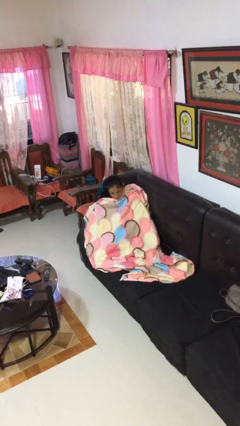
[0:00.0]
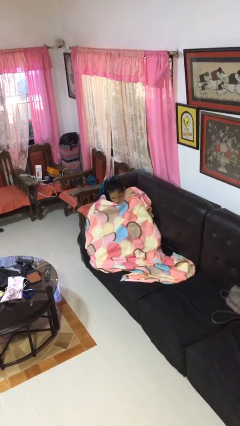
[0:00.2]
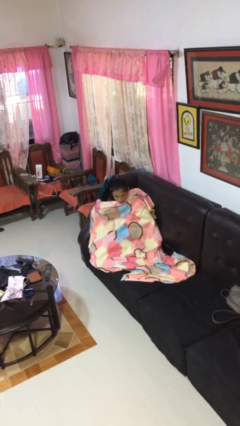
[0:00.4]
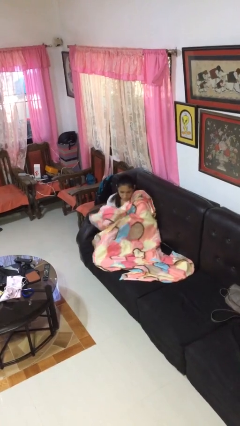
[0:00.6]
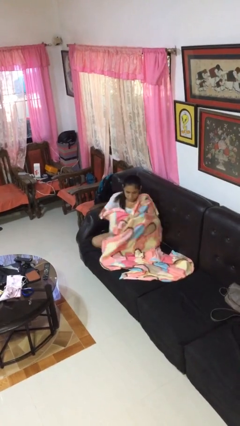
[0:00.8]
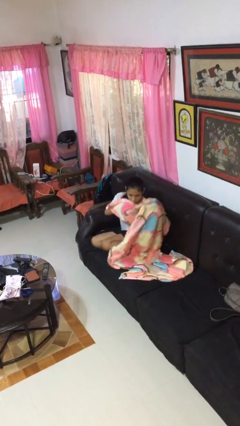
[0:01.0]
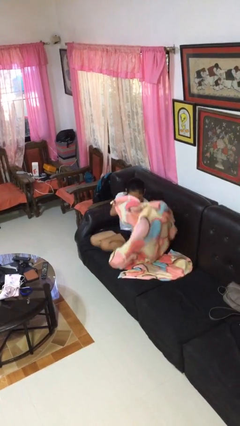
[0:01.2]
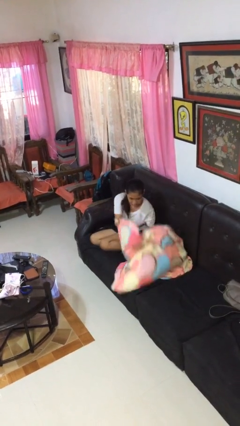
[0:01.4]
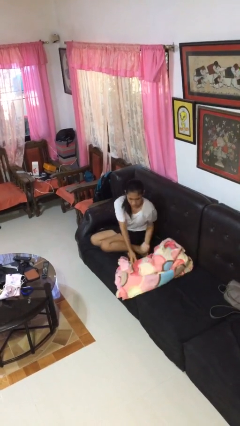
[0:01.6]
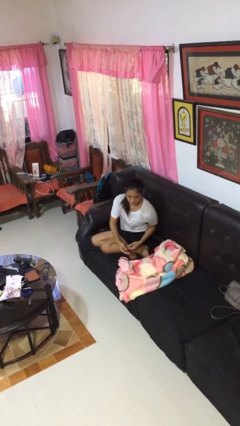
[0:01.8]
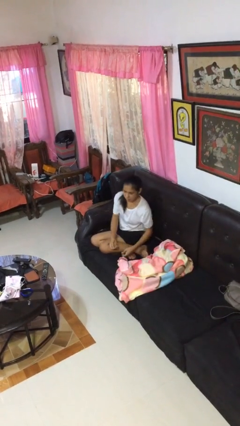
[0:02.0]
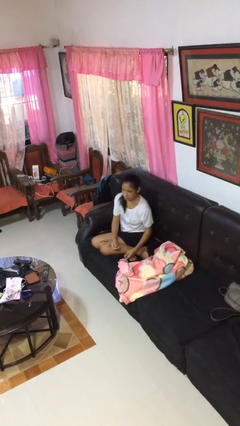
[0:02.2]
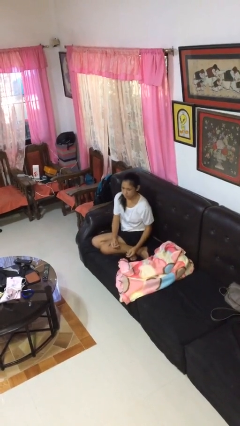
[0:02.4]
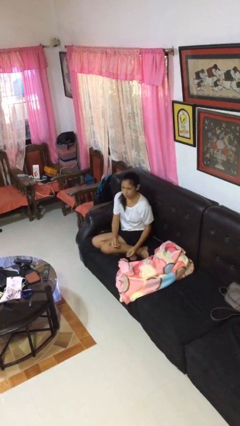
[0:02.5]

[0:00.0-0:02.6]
person uncovers with blanket

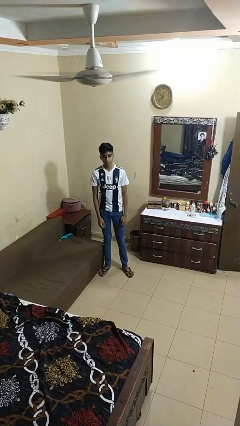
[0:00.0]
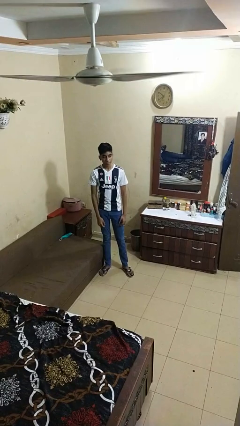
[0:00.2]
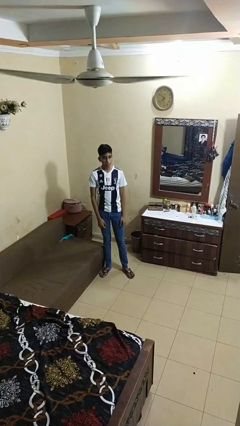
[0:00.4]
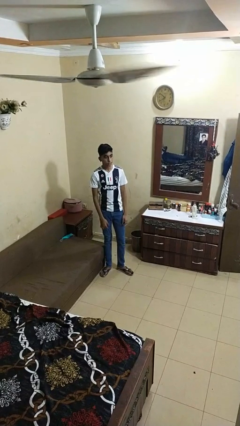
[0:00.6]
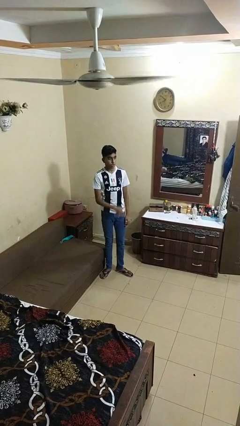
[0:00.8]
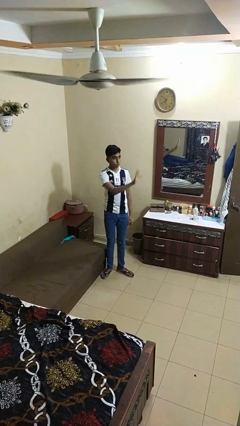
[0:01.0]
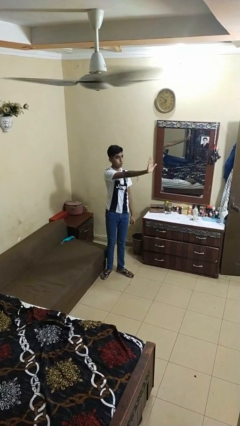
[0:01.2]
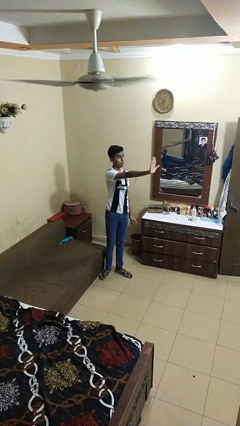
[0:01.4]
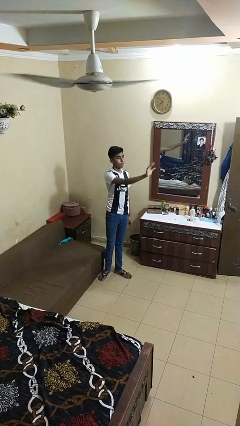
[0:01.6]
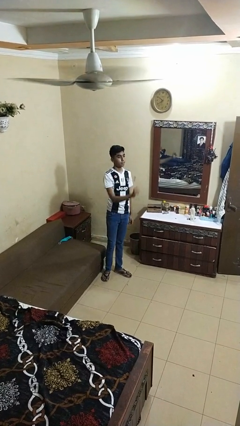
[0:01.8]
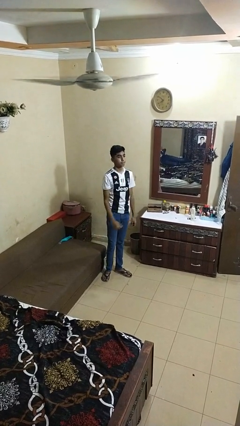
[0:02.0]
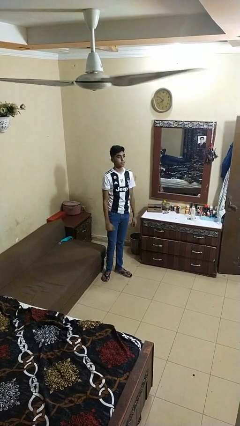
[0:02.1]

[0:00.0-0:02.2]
person gestures stop

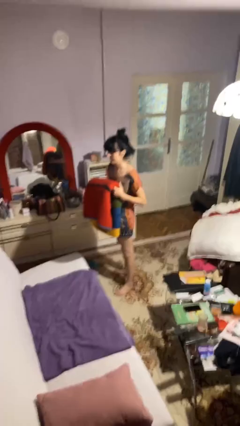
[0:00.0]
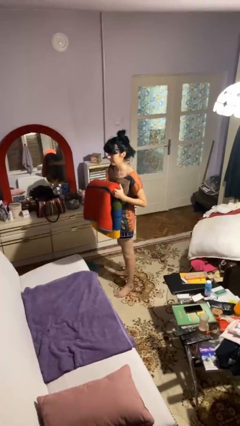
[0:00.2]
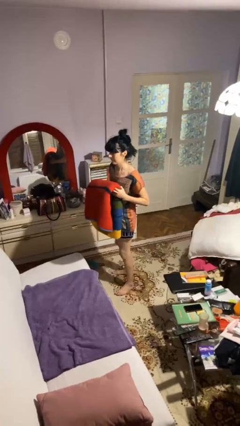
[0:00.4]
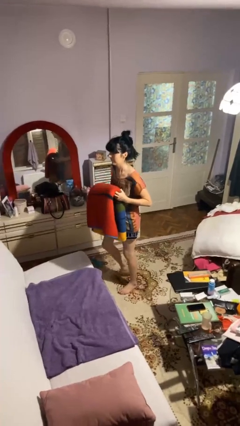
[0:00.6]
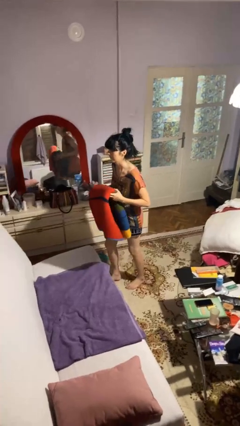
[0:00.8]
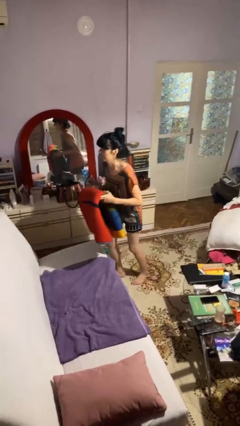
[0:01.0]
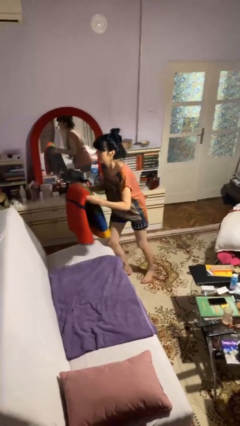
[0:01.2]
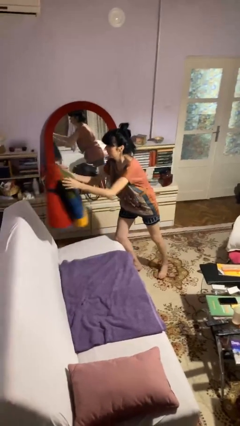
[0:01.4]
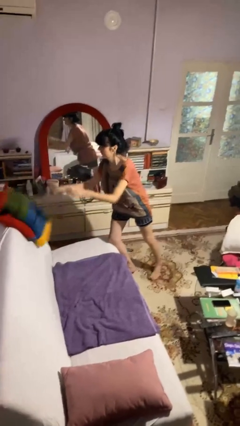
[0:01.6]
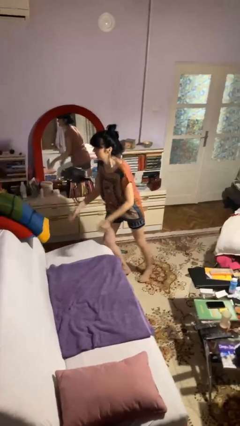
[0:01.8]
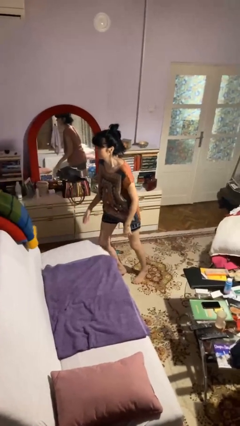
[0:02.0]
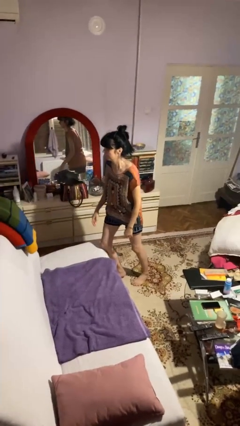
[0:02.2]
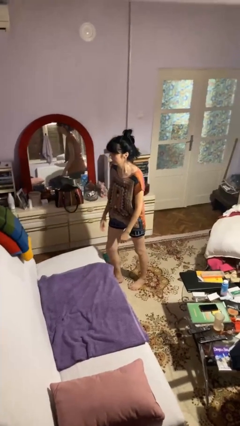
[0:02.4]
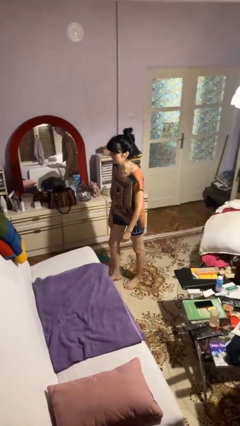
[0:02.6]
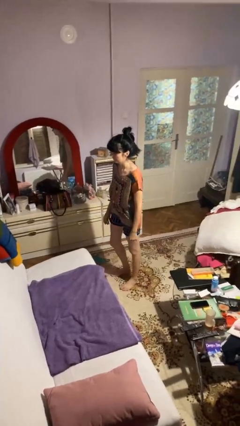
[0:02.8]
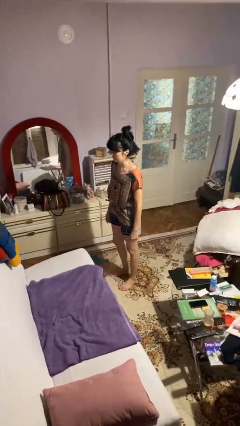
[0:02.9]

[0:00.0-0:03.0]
person puts down object on couch

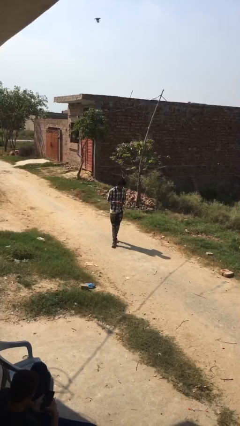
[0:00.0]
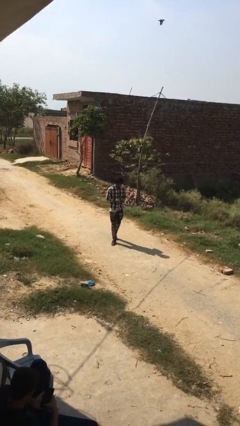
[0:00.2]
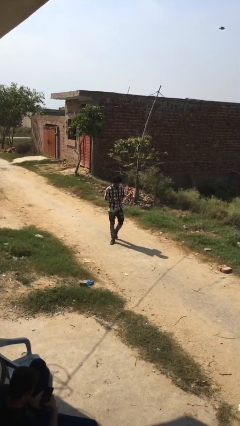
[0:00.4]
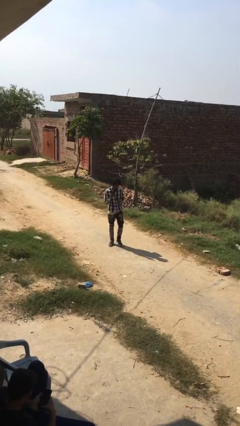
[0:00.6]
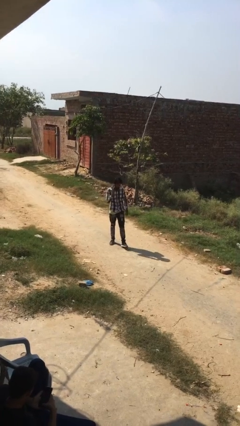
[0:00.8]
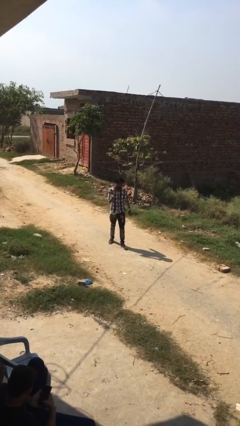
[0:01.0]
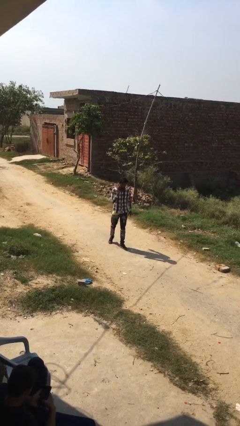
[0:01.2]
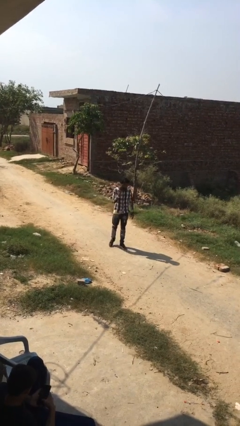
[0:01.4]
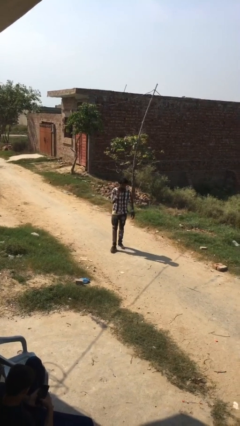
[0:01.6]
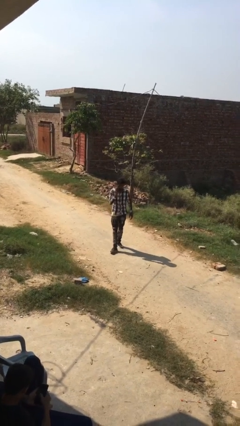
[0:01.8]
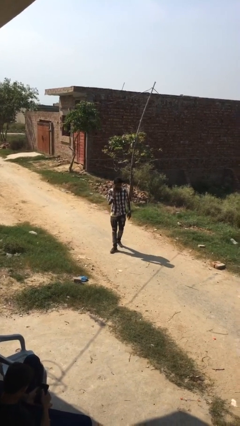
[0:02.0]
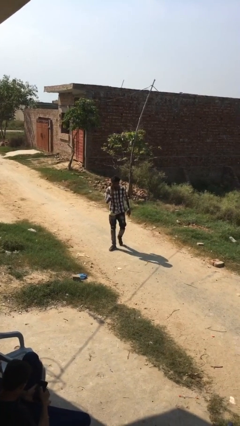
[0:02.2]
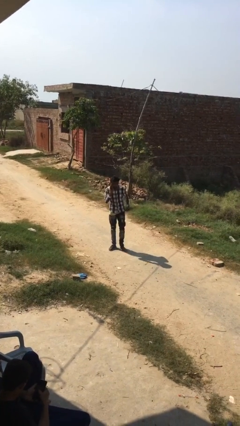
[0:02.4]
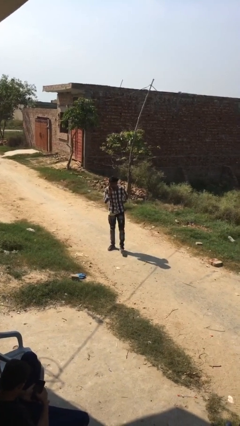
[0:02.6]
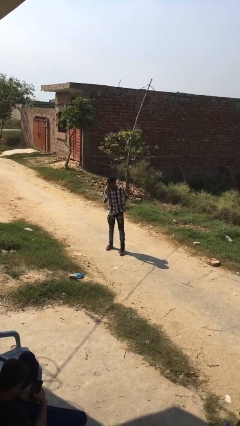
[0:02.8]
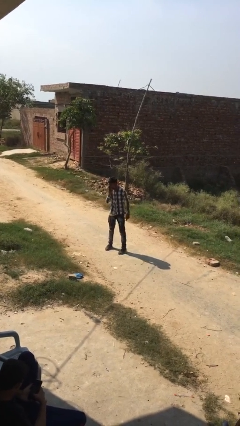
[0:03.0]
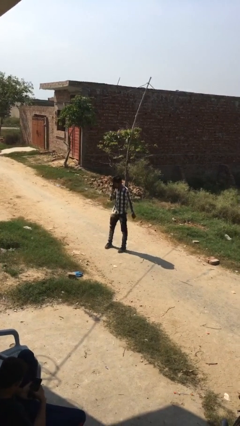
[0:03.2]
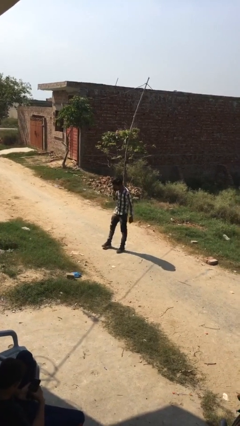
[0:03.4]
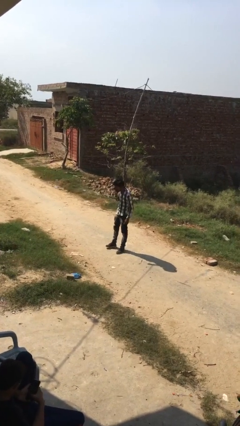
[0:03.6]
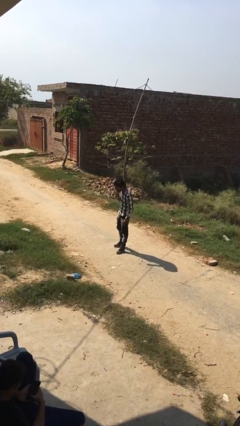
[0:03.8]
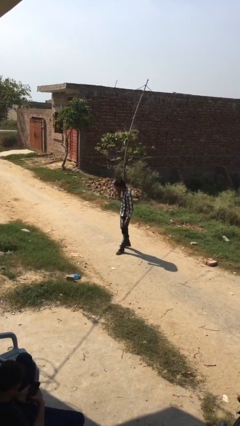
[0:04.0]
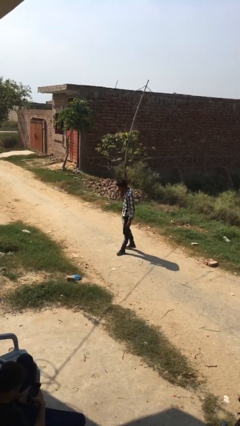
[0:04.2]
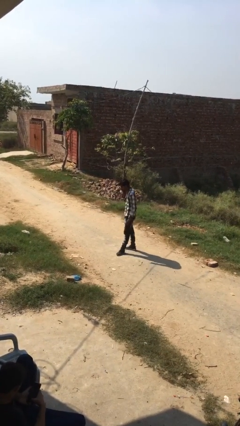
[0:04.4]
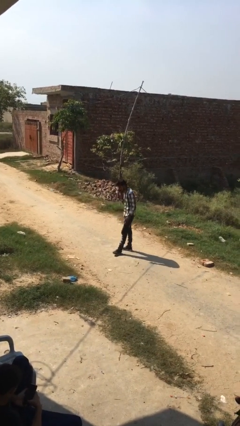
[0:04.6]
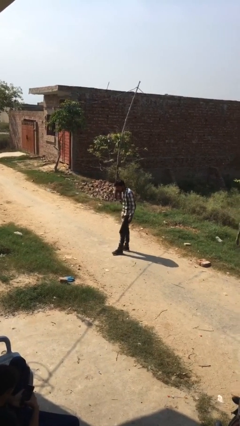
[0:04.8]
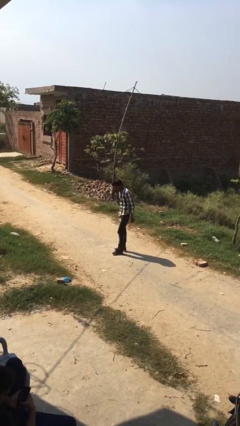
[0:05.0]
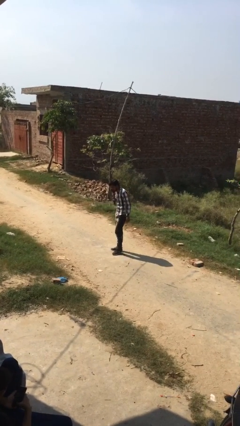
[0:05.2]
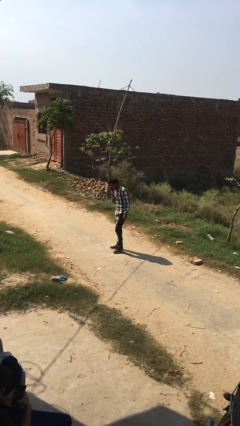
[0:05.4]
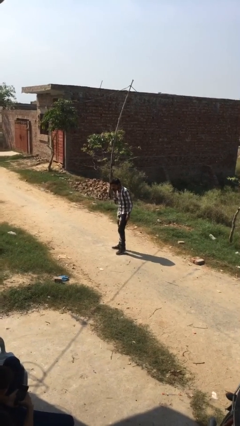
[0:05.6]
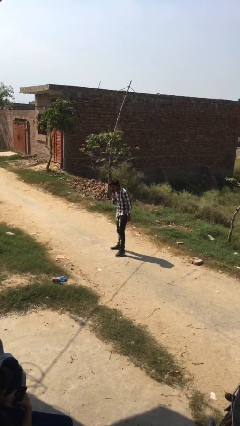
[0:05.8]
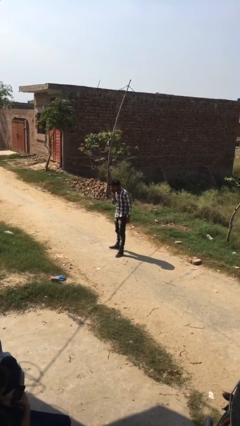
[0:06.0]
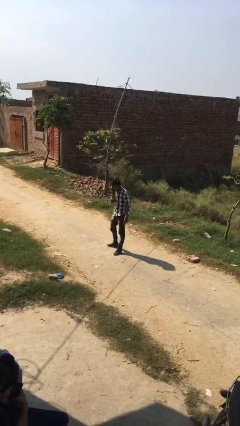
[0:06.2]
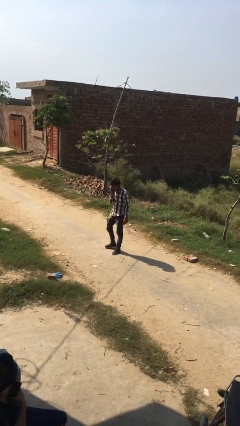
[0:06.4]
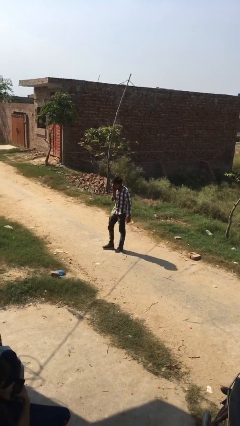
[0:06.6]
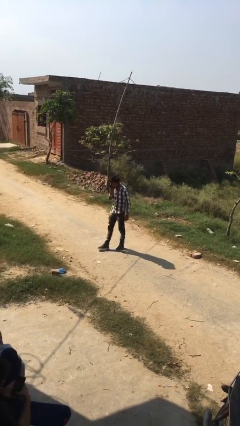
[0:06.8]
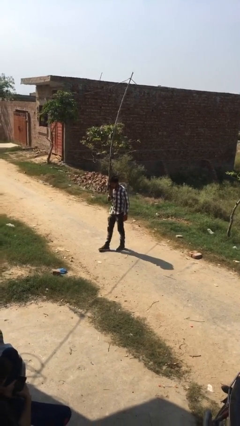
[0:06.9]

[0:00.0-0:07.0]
person talks on phone

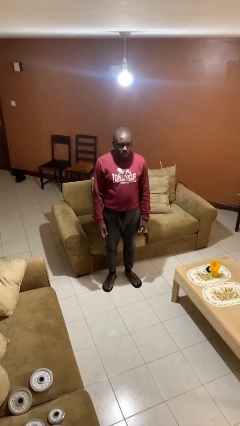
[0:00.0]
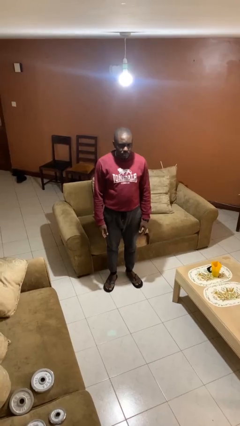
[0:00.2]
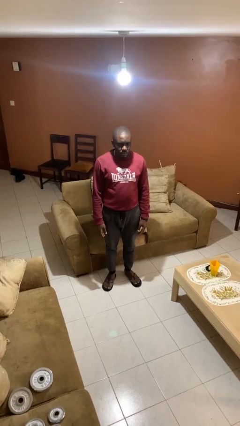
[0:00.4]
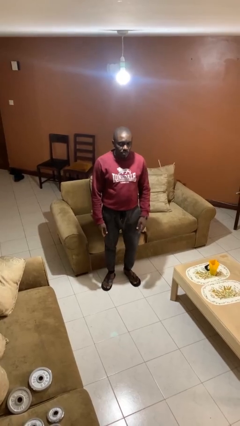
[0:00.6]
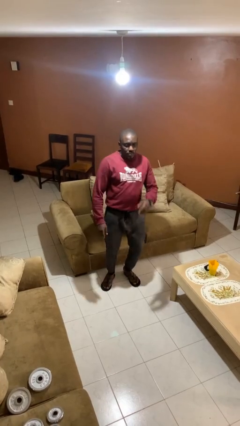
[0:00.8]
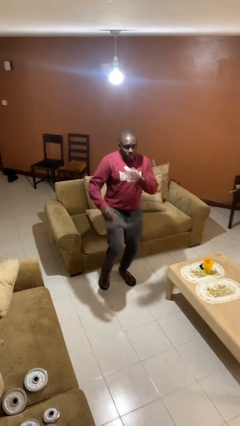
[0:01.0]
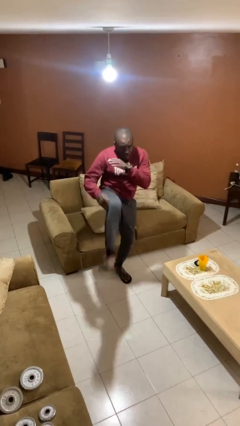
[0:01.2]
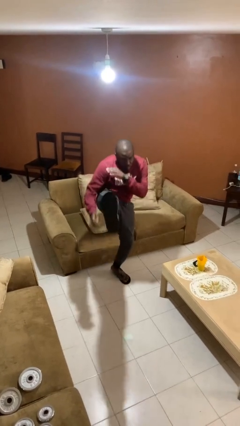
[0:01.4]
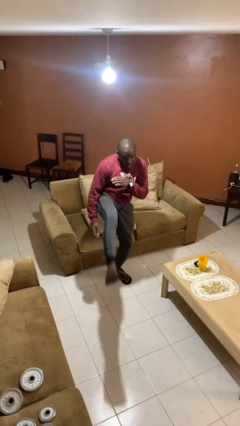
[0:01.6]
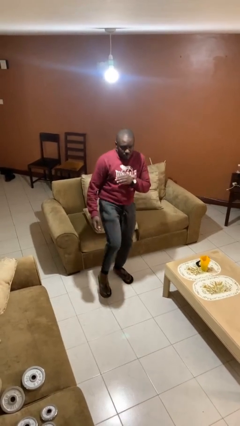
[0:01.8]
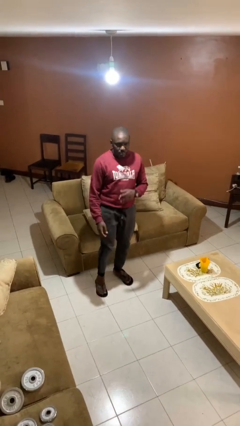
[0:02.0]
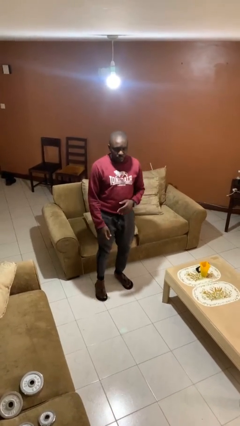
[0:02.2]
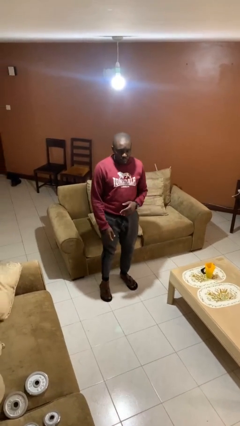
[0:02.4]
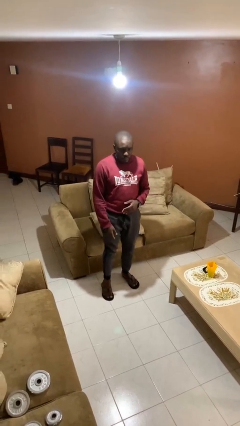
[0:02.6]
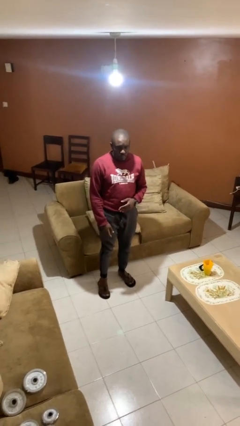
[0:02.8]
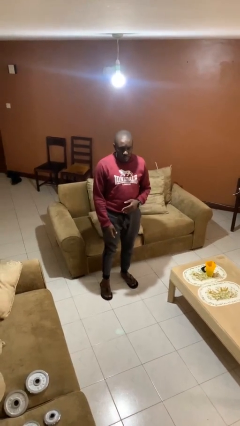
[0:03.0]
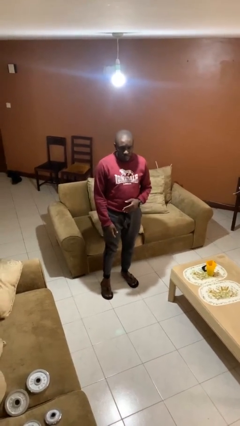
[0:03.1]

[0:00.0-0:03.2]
person karate kicks
